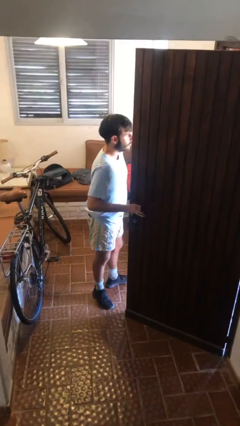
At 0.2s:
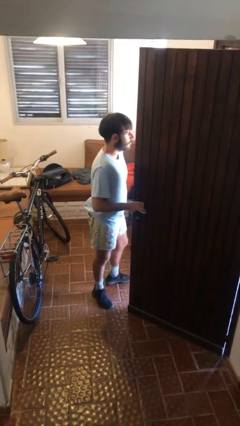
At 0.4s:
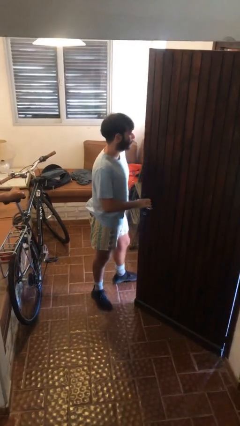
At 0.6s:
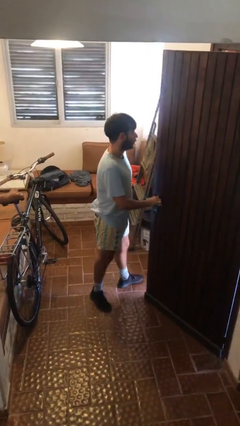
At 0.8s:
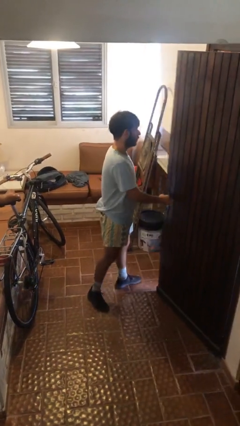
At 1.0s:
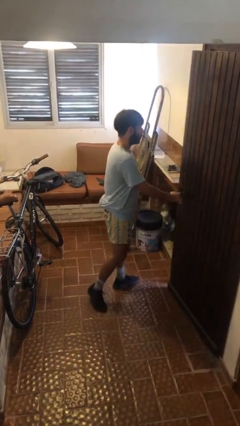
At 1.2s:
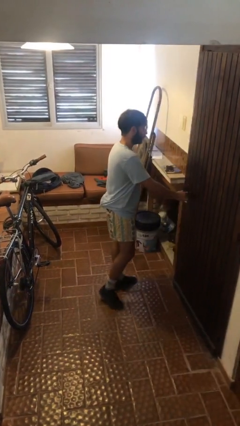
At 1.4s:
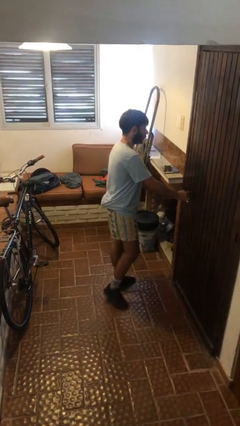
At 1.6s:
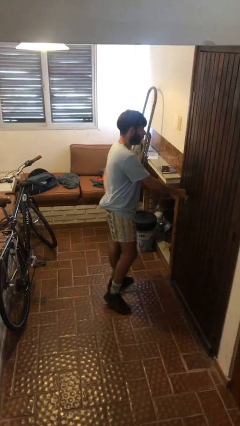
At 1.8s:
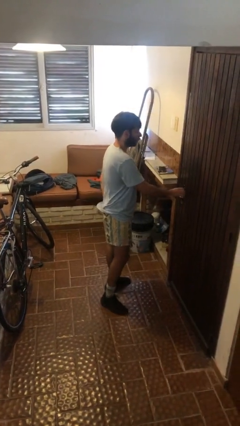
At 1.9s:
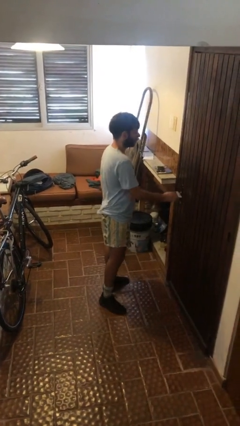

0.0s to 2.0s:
person closes facility door

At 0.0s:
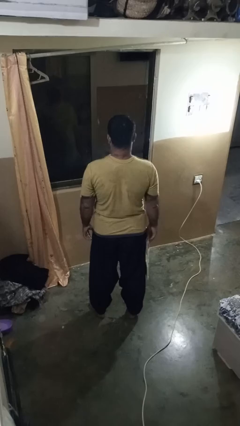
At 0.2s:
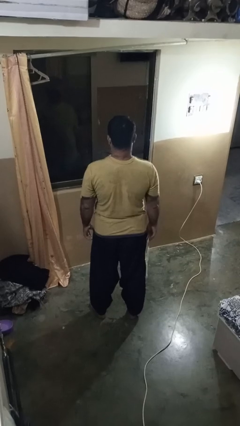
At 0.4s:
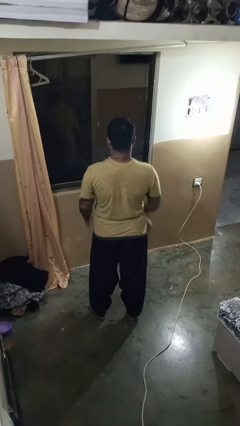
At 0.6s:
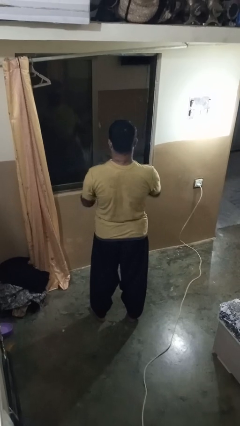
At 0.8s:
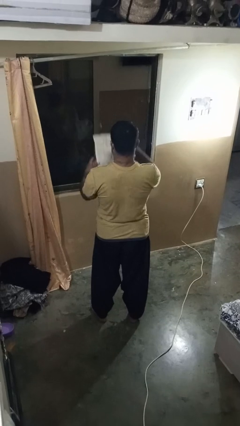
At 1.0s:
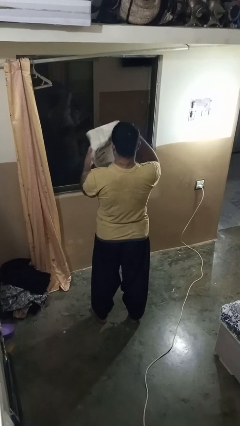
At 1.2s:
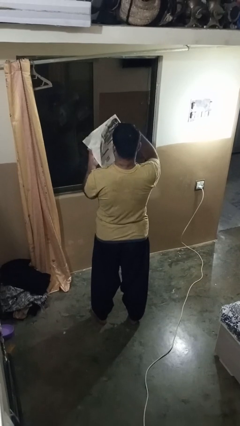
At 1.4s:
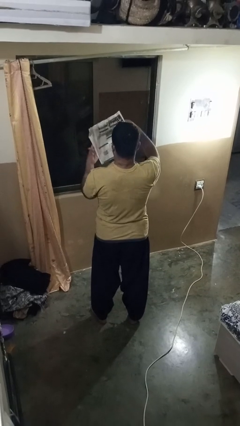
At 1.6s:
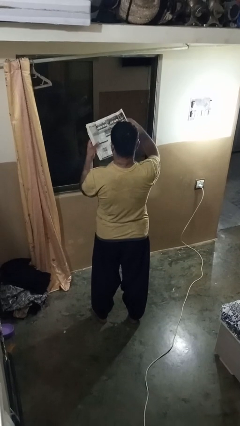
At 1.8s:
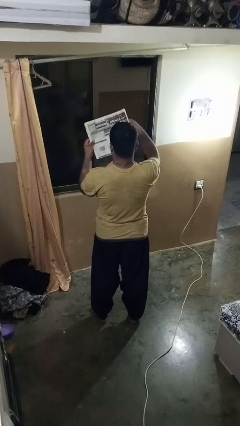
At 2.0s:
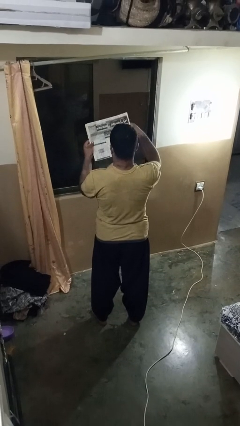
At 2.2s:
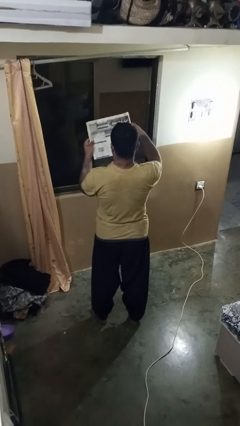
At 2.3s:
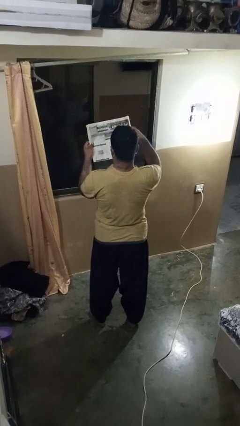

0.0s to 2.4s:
person reads newspaper

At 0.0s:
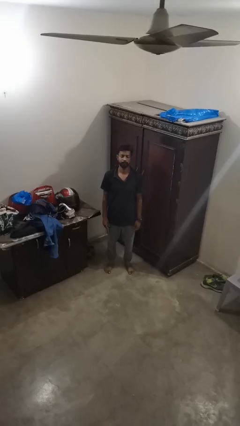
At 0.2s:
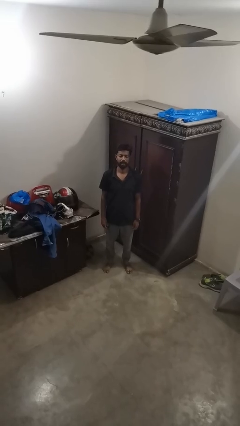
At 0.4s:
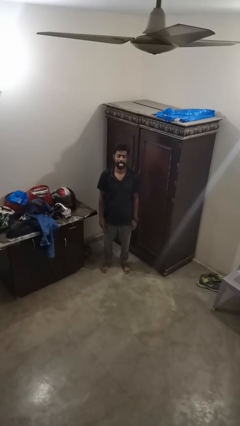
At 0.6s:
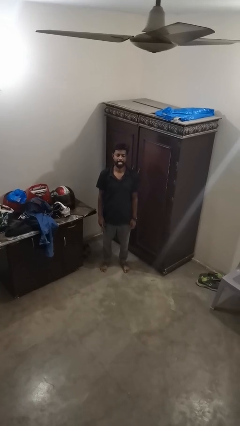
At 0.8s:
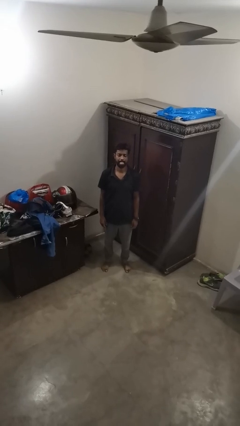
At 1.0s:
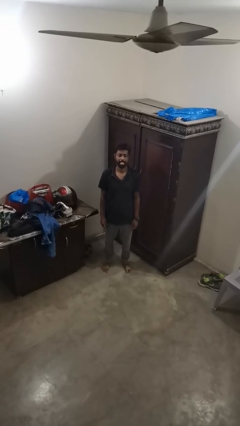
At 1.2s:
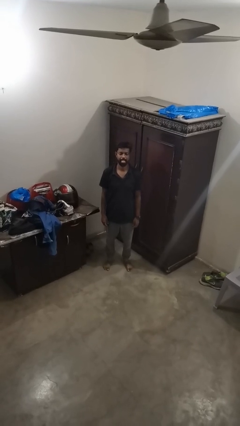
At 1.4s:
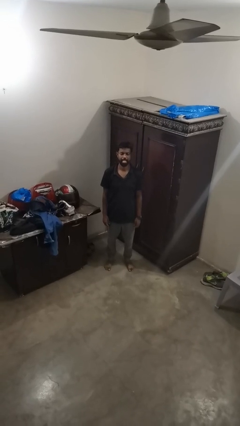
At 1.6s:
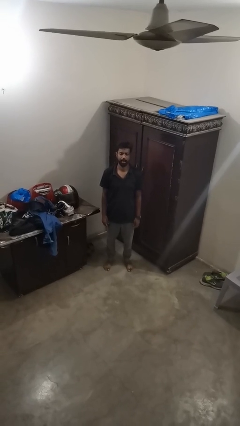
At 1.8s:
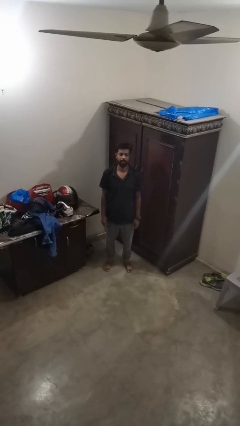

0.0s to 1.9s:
person sticks out tongue

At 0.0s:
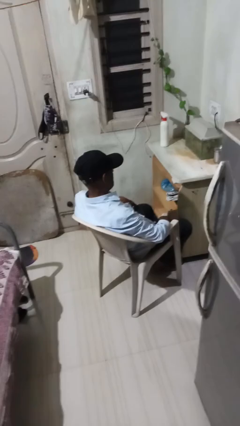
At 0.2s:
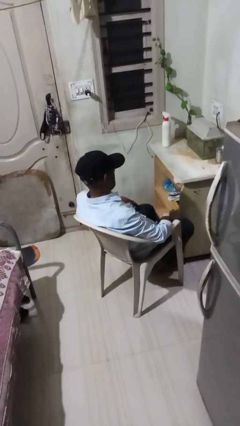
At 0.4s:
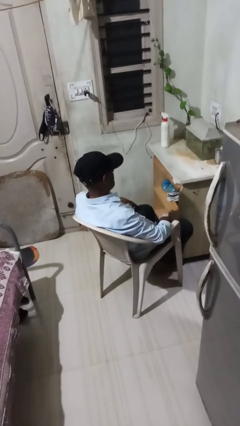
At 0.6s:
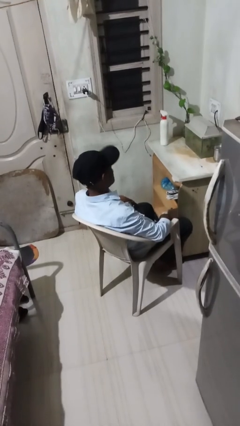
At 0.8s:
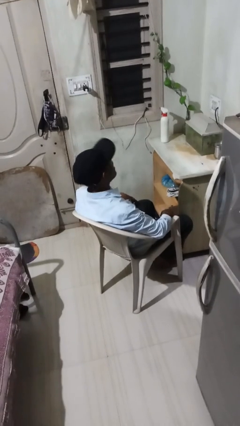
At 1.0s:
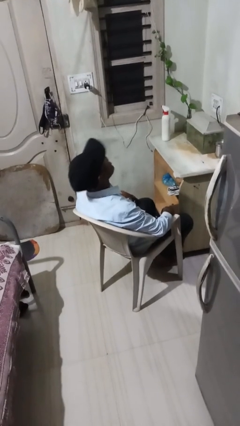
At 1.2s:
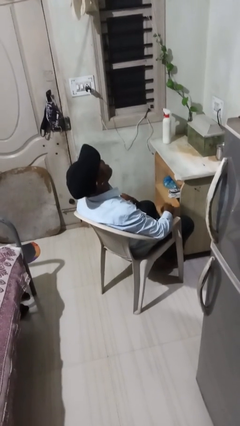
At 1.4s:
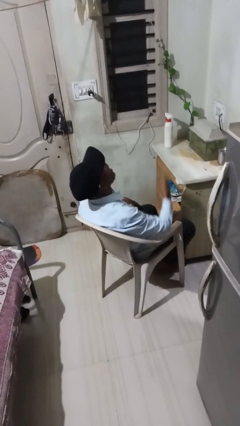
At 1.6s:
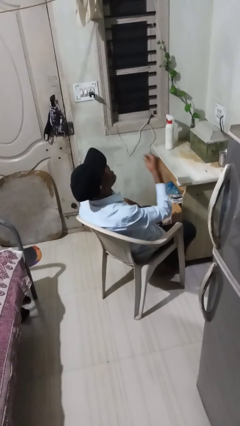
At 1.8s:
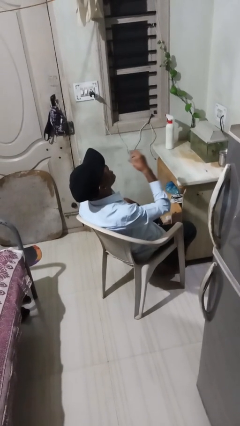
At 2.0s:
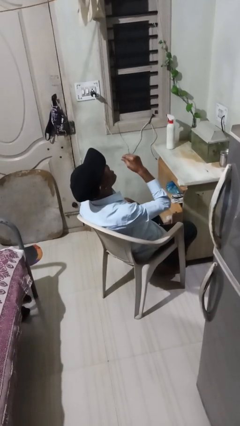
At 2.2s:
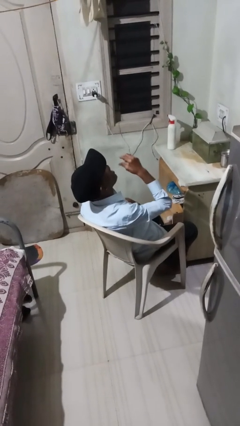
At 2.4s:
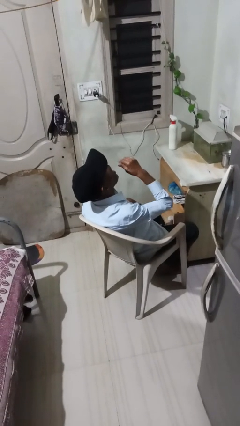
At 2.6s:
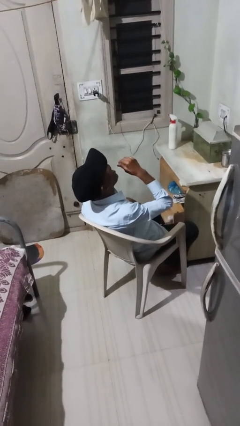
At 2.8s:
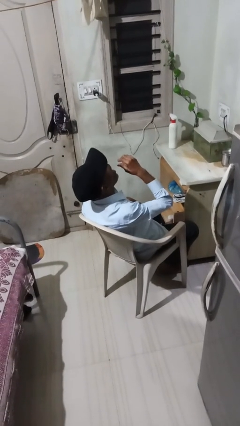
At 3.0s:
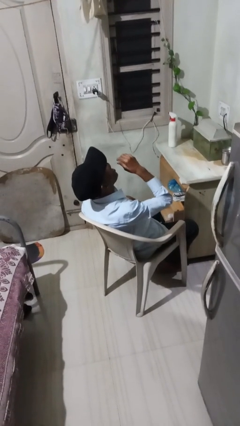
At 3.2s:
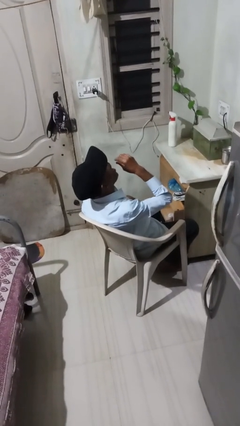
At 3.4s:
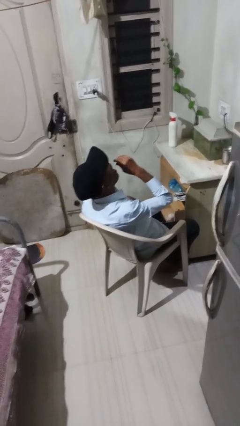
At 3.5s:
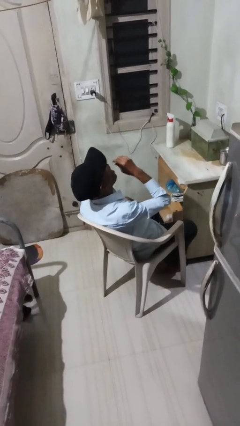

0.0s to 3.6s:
person yawns

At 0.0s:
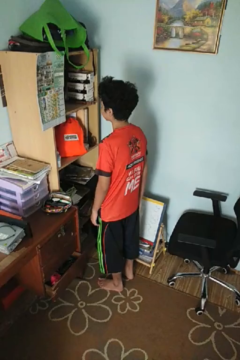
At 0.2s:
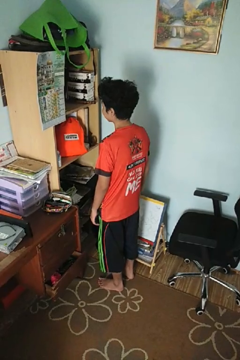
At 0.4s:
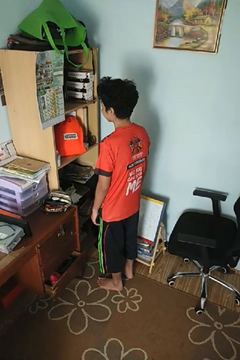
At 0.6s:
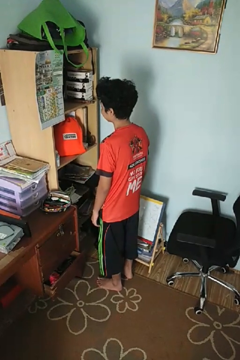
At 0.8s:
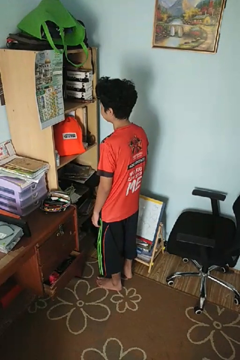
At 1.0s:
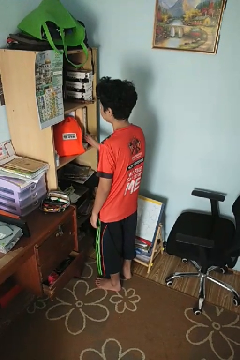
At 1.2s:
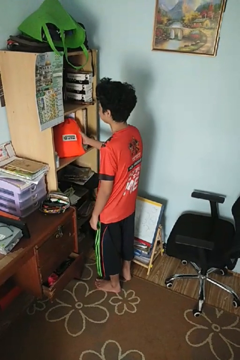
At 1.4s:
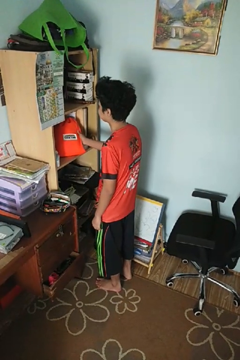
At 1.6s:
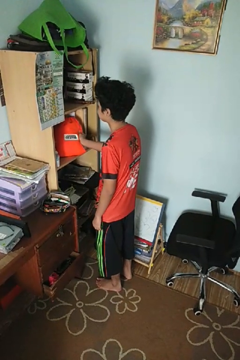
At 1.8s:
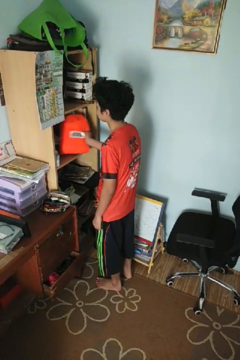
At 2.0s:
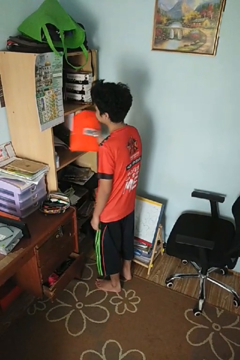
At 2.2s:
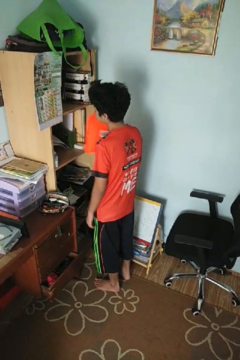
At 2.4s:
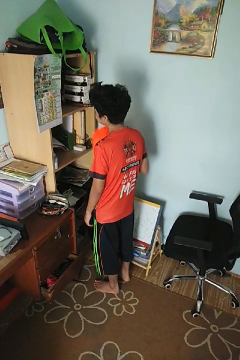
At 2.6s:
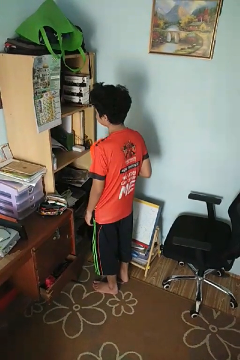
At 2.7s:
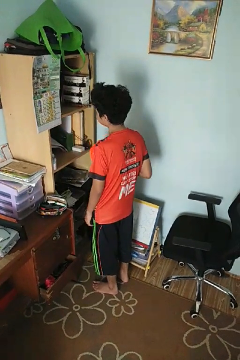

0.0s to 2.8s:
person picks up object from cabinet

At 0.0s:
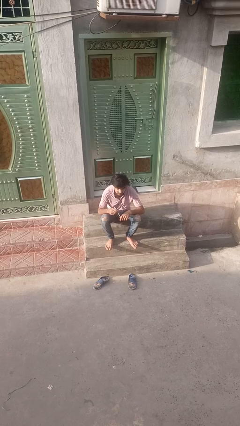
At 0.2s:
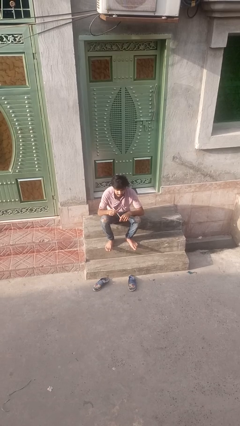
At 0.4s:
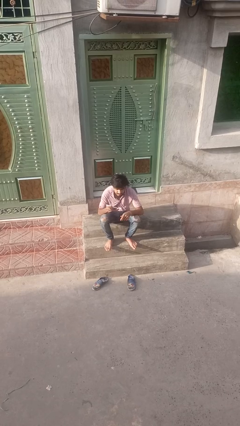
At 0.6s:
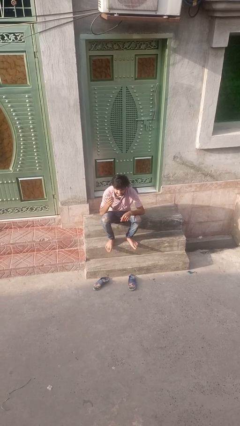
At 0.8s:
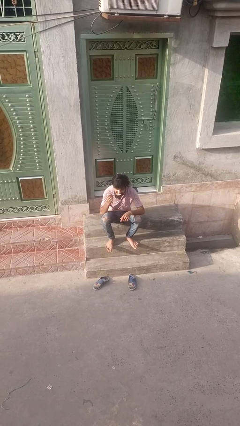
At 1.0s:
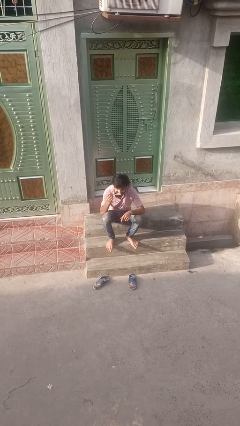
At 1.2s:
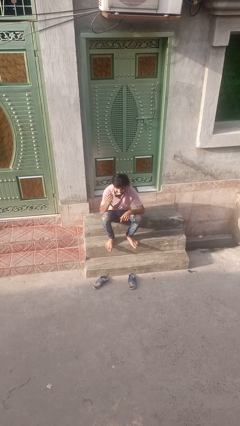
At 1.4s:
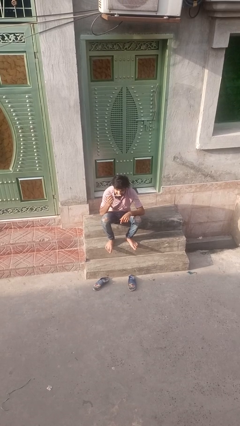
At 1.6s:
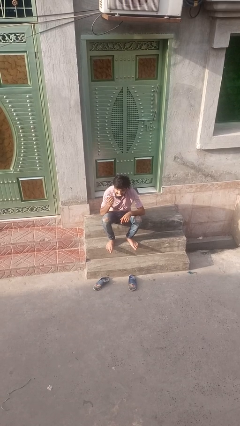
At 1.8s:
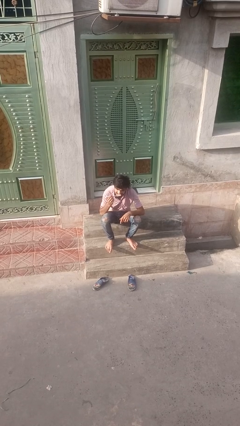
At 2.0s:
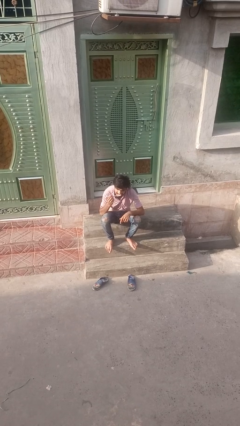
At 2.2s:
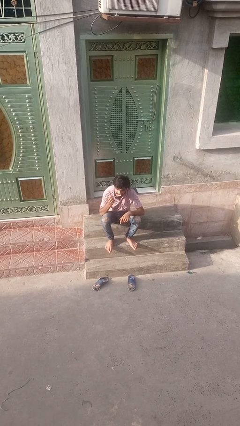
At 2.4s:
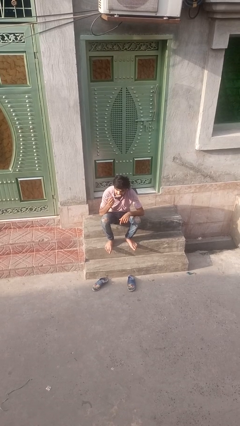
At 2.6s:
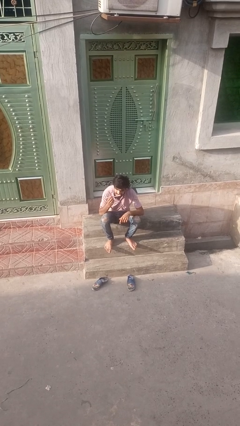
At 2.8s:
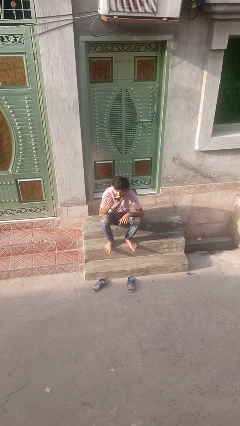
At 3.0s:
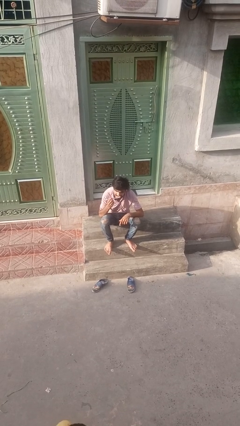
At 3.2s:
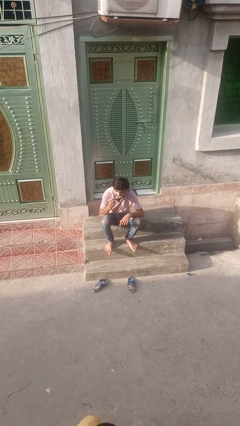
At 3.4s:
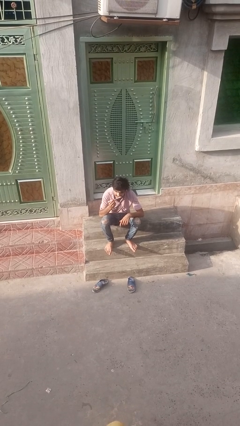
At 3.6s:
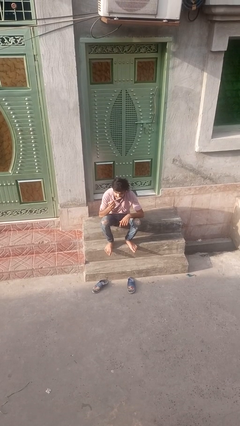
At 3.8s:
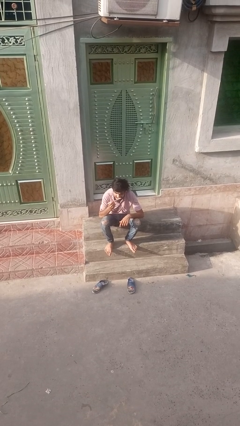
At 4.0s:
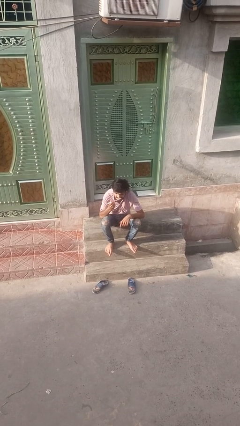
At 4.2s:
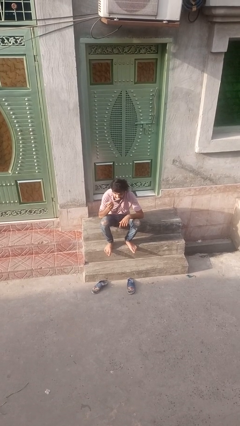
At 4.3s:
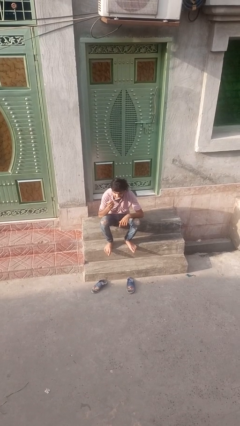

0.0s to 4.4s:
person brushes hair

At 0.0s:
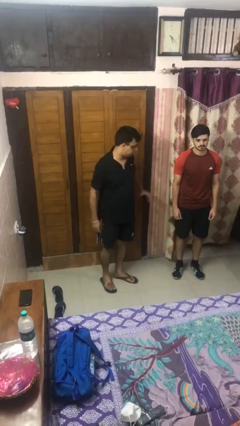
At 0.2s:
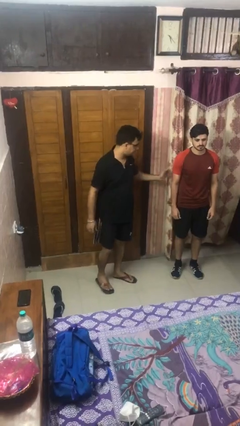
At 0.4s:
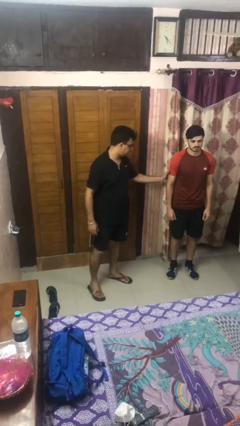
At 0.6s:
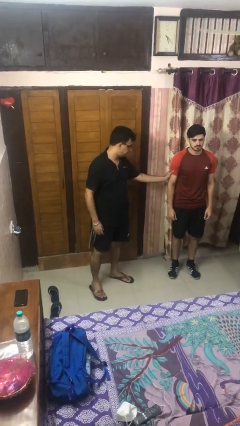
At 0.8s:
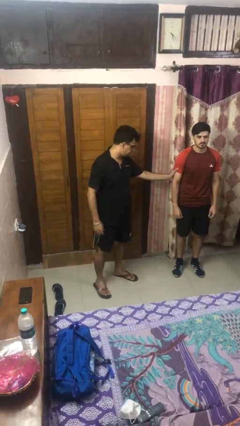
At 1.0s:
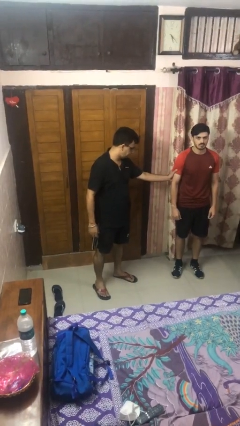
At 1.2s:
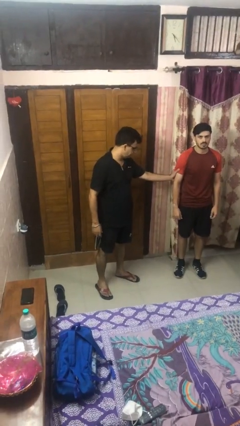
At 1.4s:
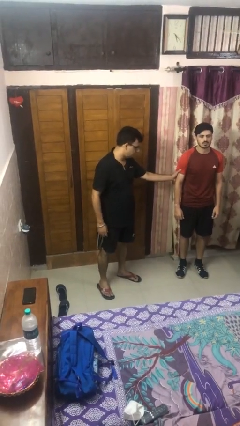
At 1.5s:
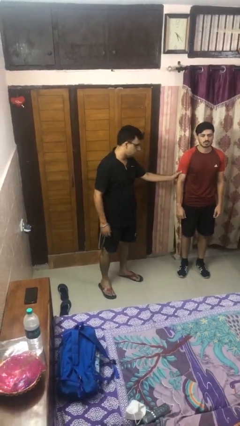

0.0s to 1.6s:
person grabs person by bicep
